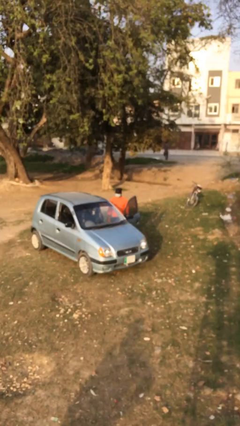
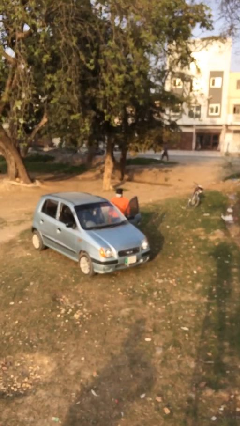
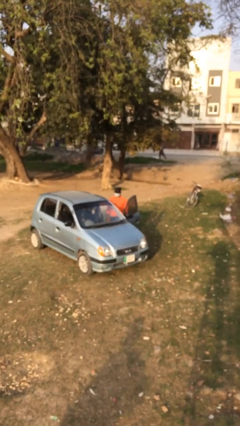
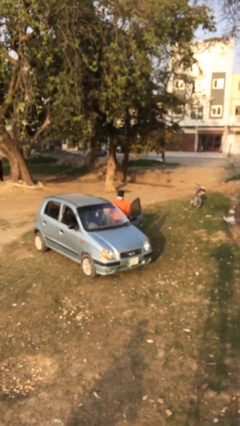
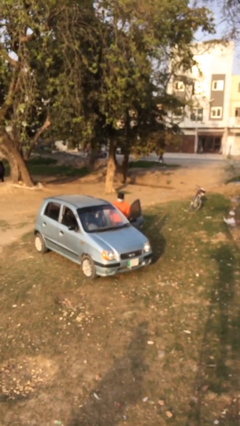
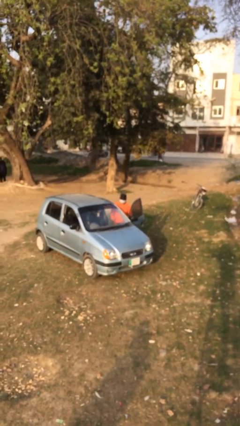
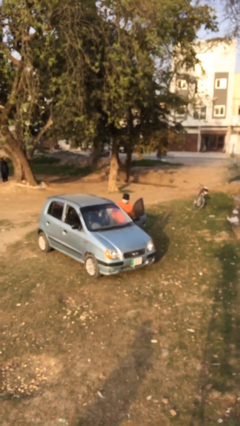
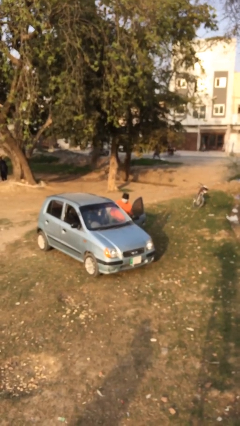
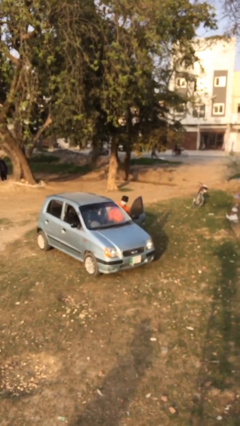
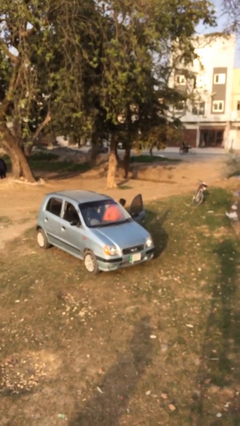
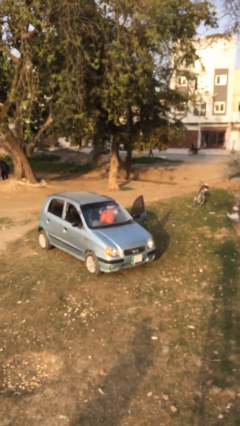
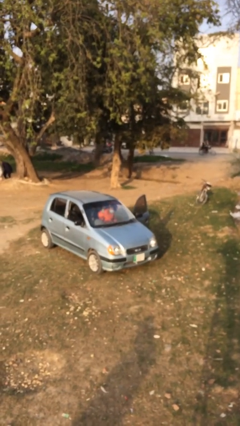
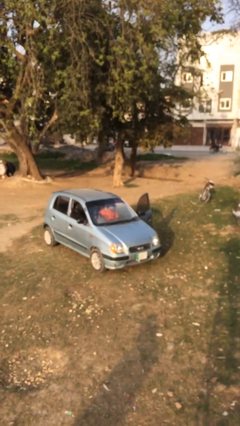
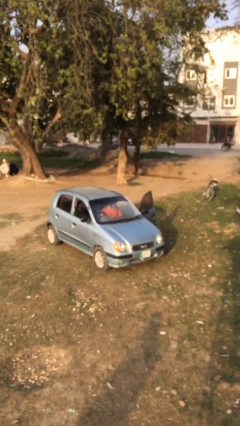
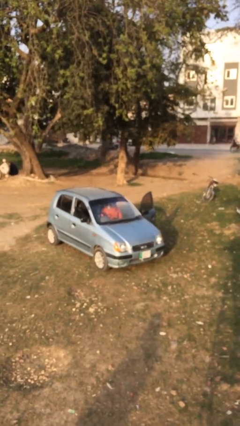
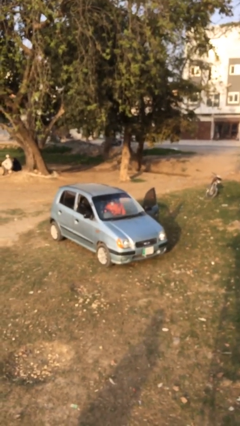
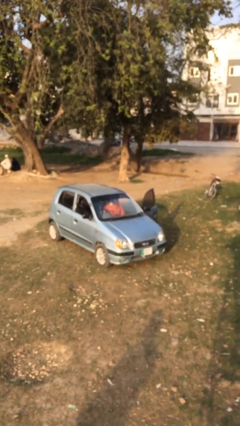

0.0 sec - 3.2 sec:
person enters car

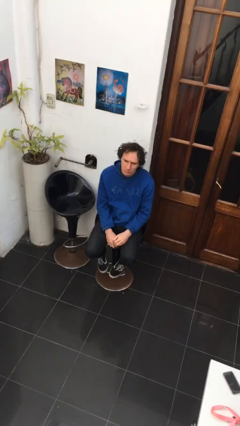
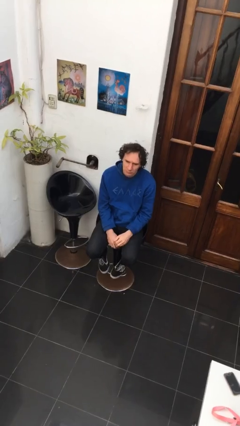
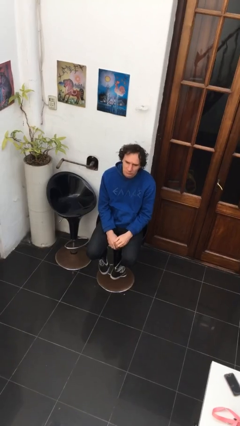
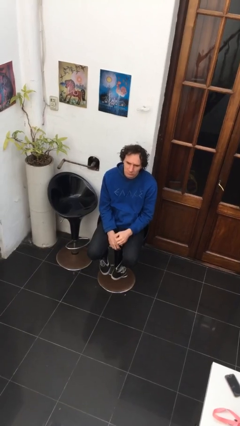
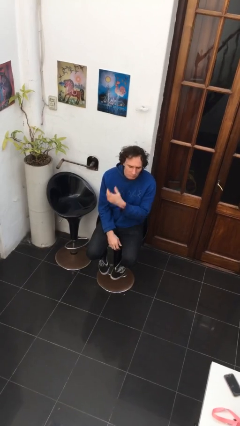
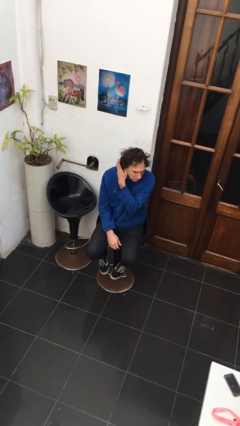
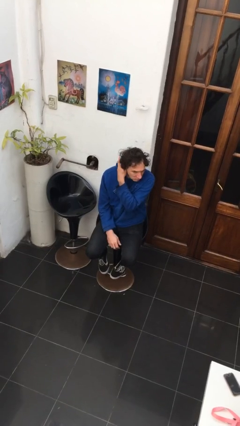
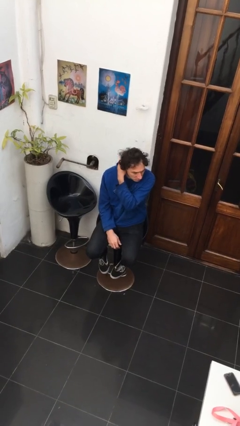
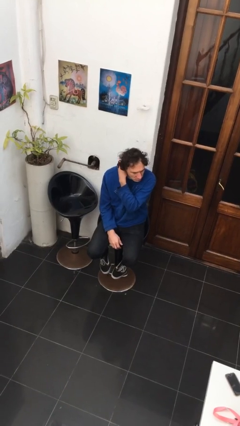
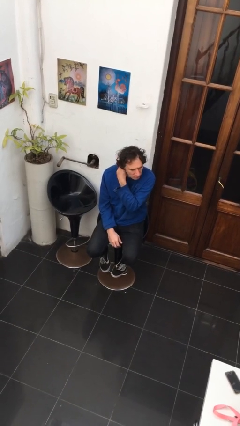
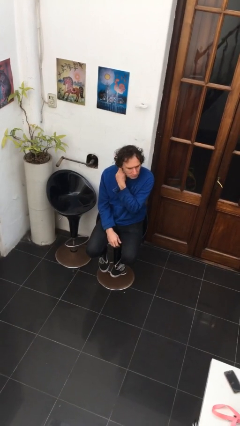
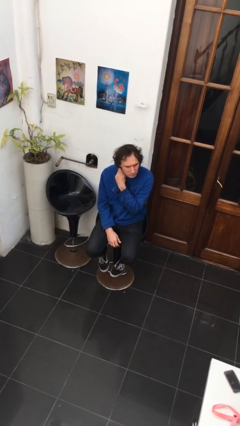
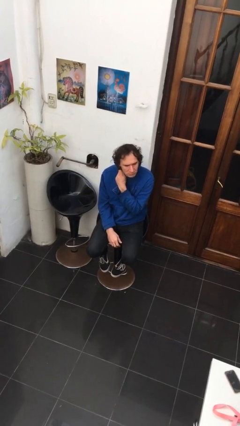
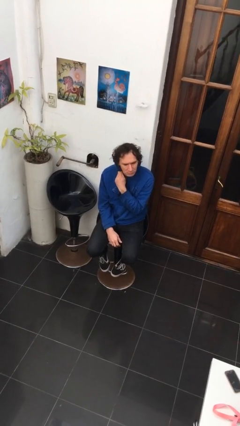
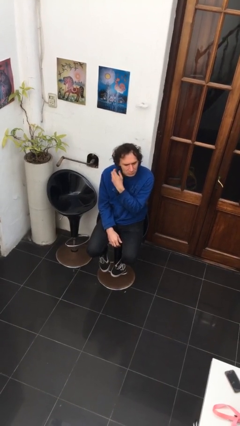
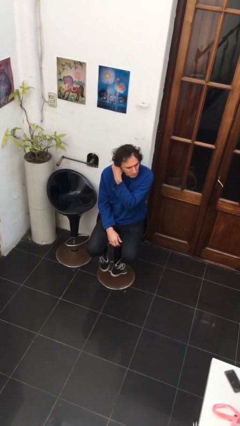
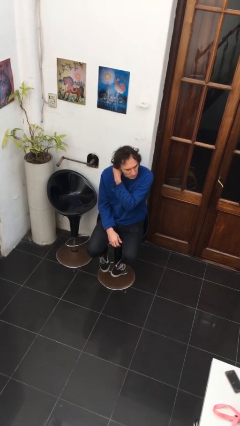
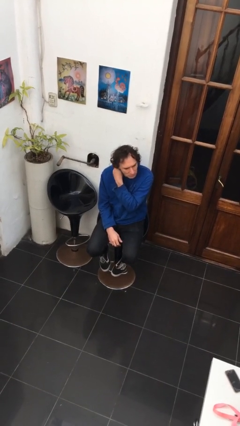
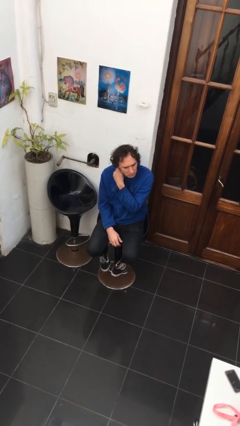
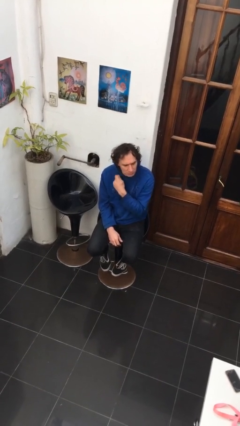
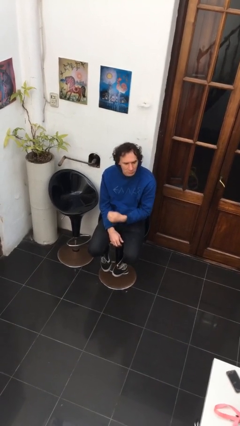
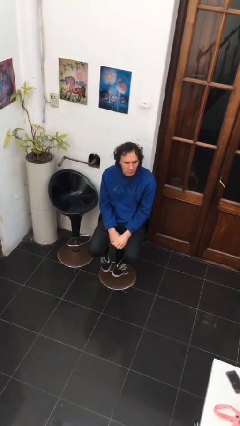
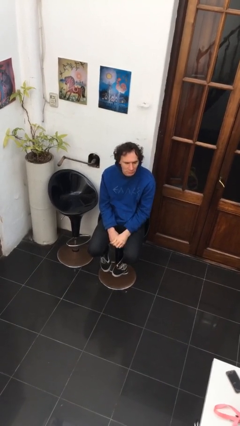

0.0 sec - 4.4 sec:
person strokes hair

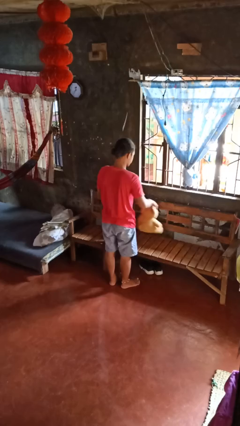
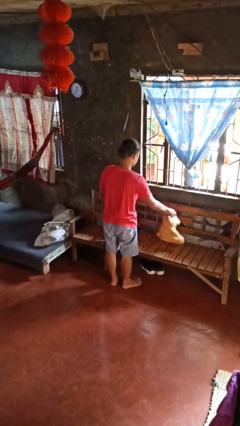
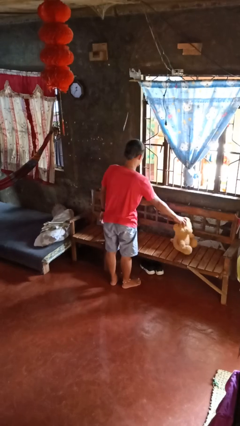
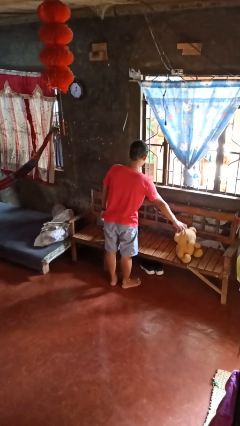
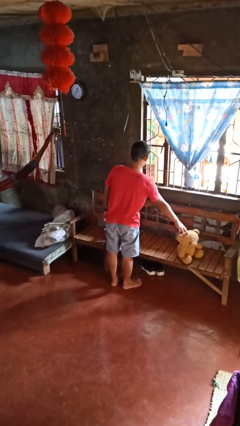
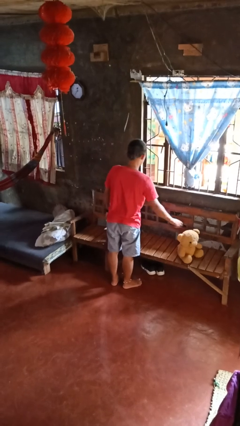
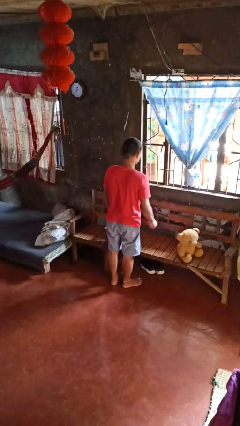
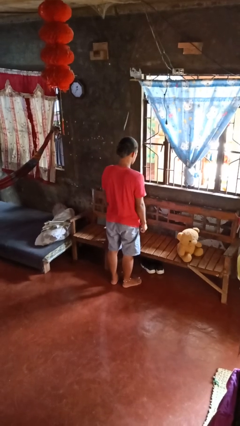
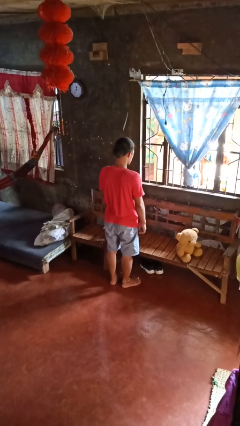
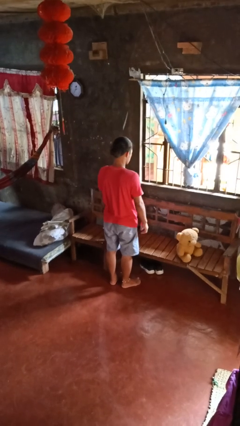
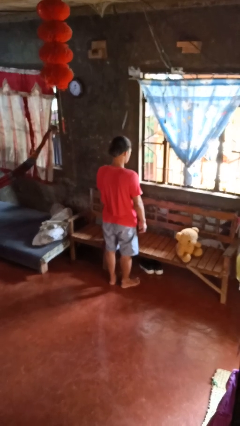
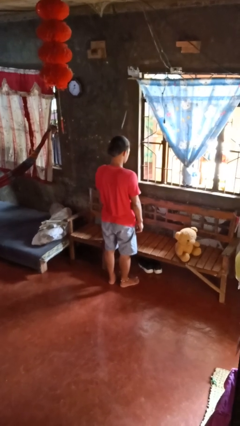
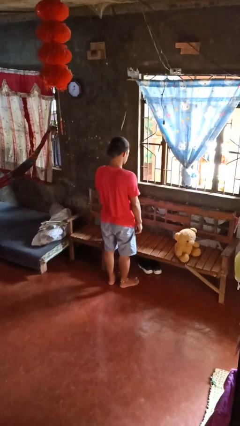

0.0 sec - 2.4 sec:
person puts down object on couch

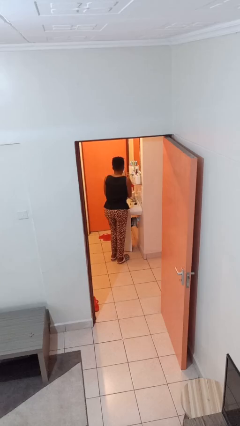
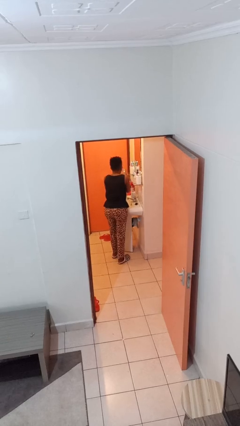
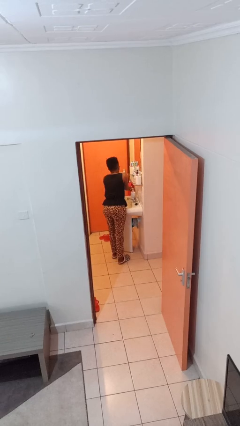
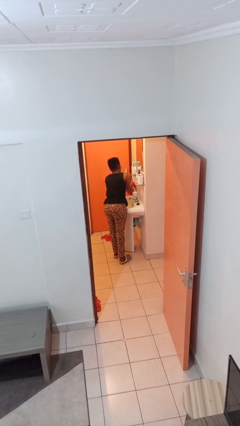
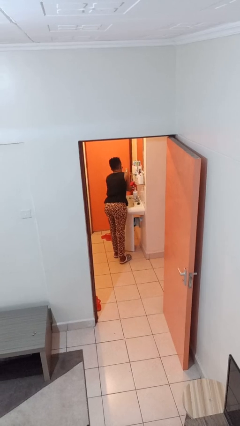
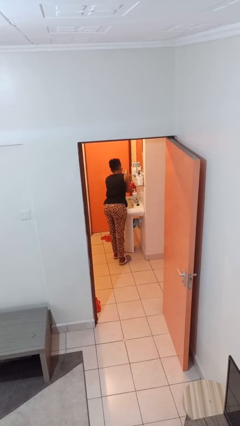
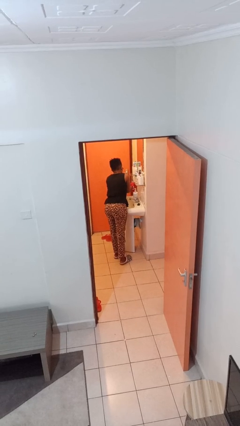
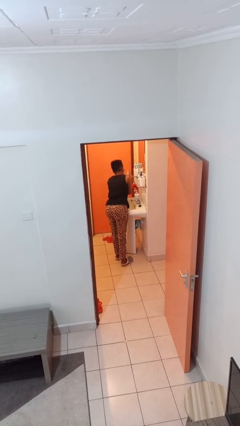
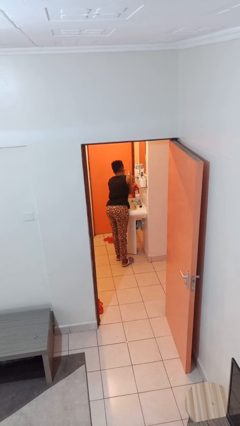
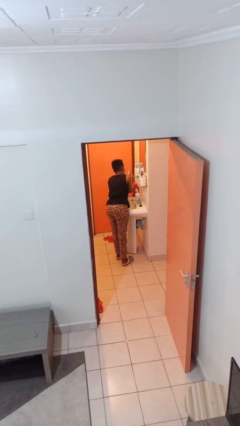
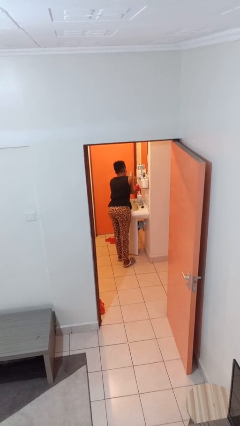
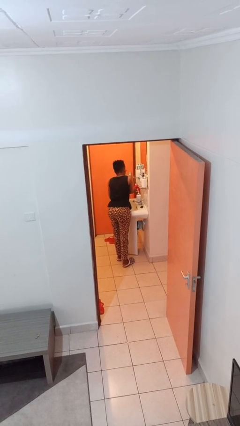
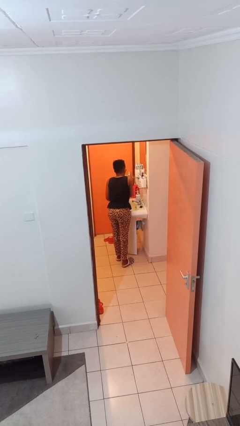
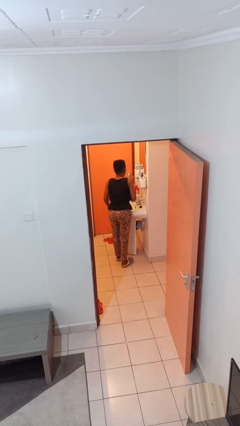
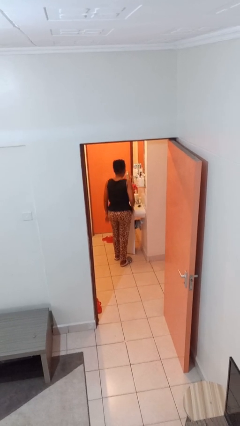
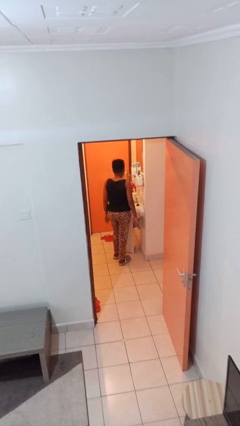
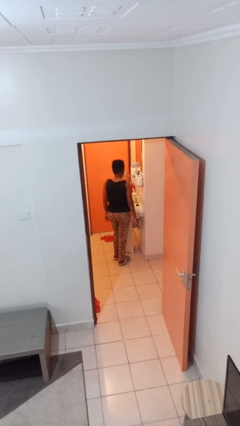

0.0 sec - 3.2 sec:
person dries hands with towel

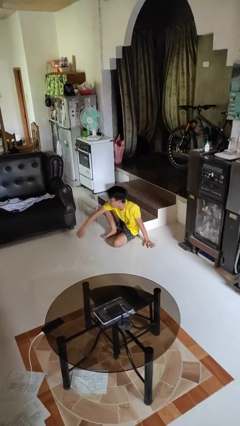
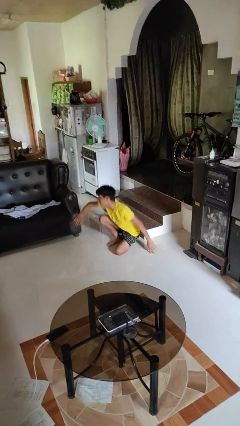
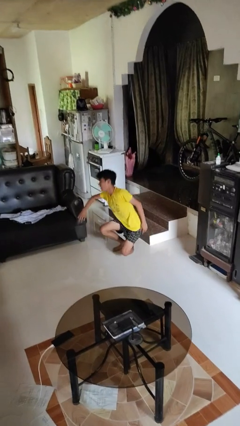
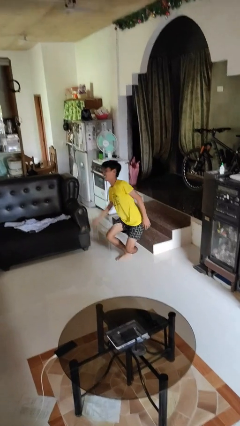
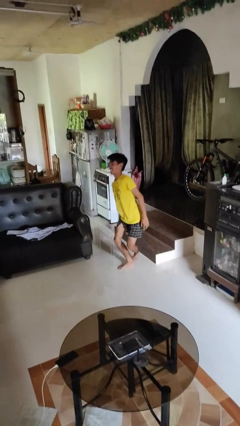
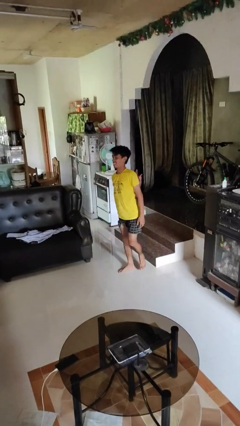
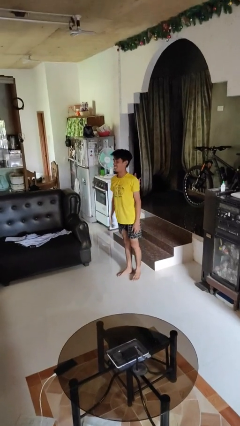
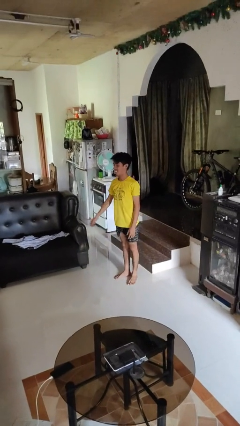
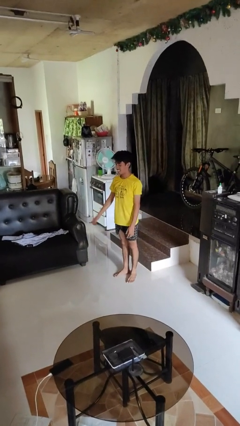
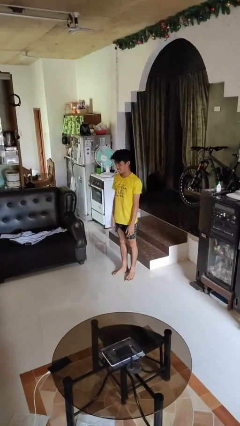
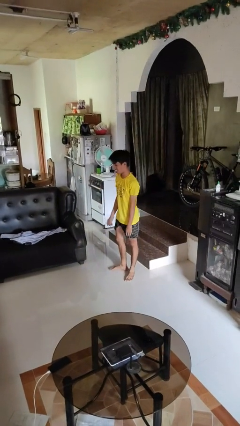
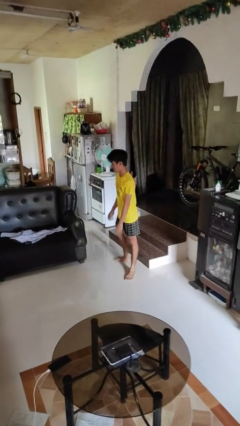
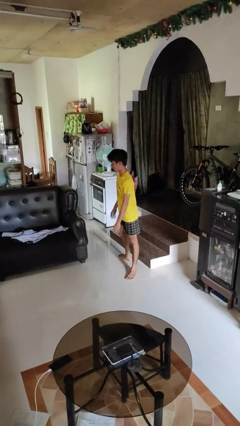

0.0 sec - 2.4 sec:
person stands up from floor

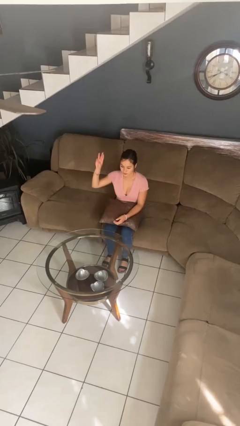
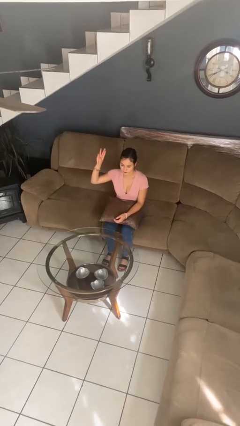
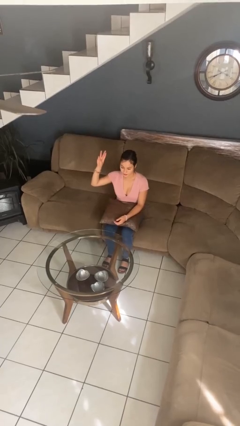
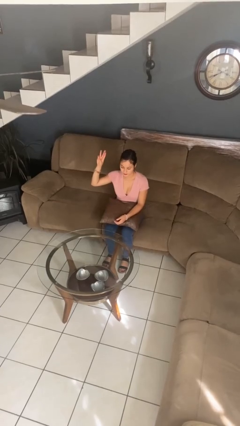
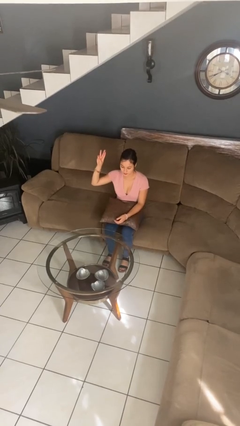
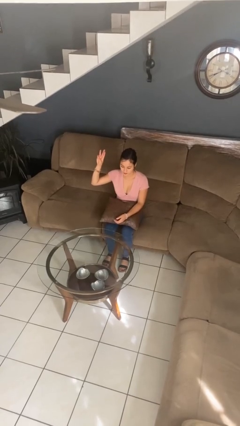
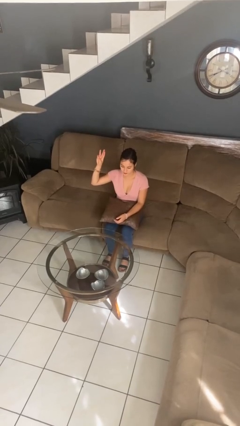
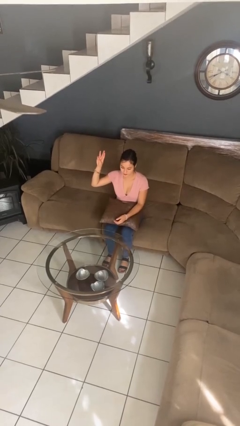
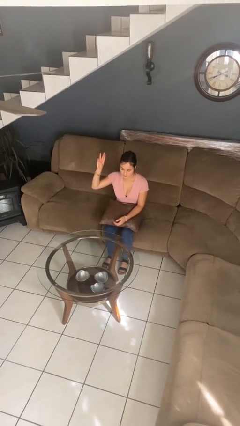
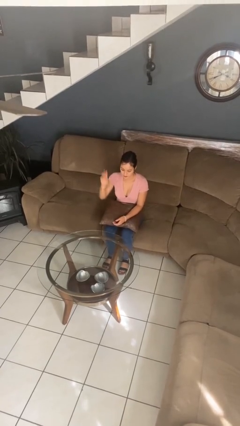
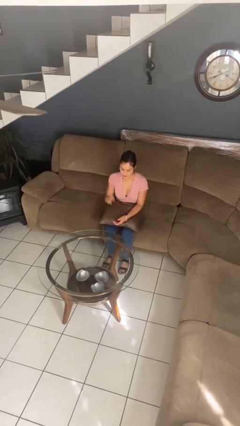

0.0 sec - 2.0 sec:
person gestures number three
